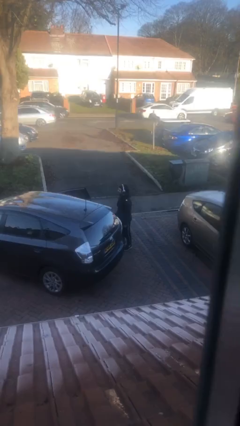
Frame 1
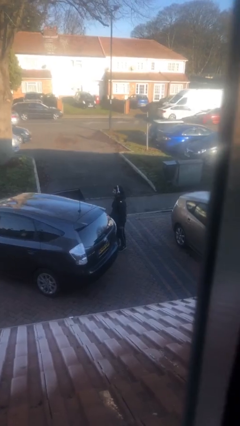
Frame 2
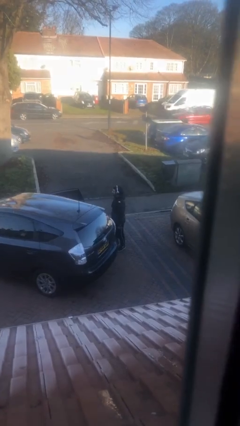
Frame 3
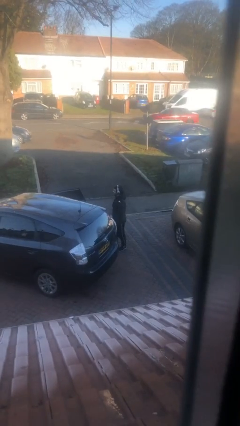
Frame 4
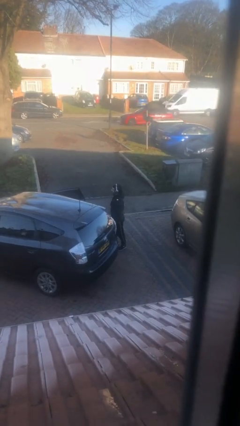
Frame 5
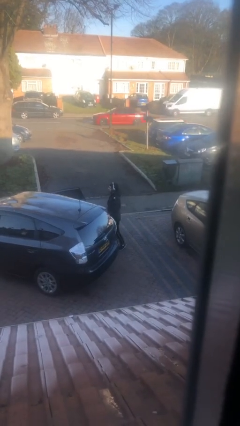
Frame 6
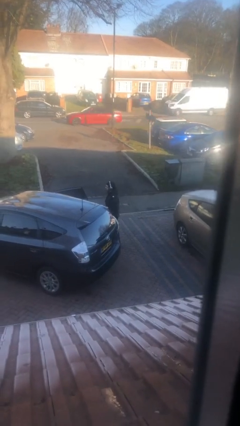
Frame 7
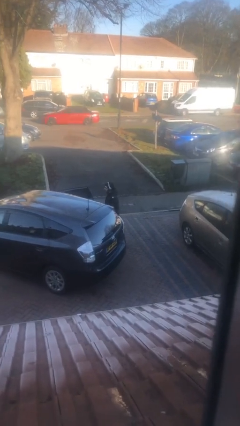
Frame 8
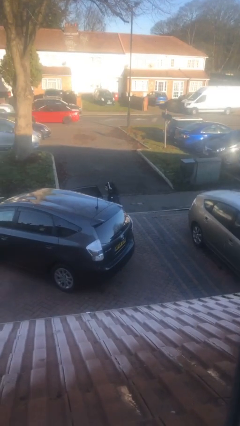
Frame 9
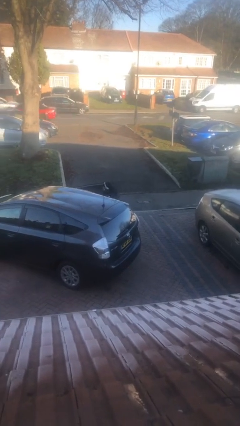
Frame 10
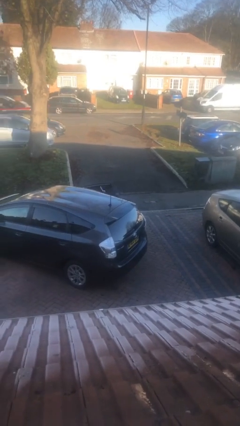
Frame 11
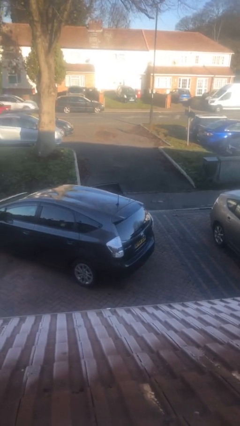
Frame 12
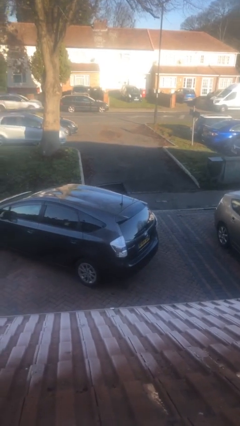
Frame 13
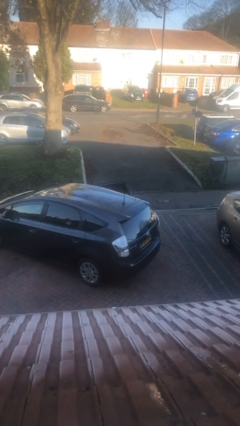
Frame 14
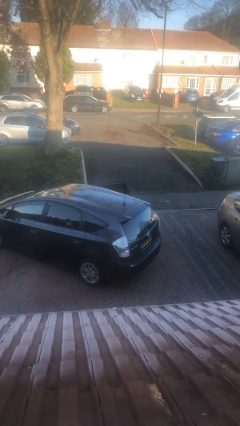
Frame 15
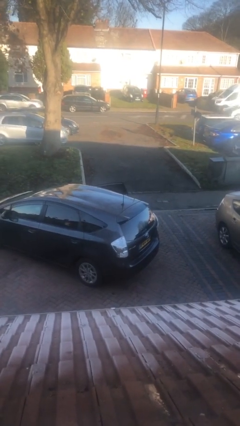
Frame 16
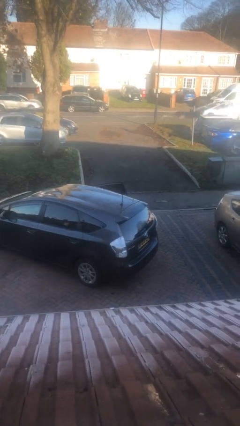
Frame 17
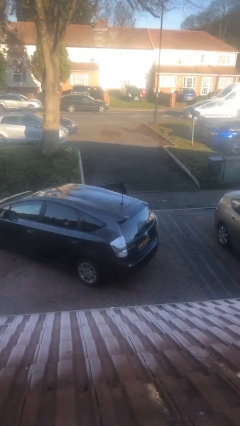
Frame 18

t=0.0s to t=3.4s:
person enters car

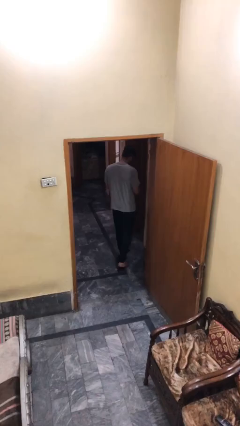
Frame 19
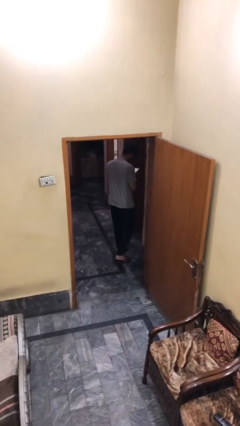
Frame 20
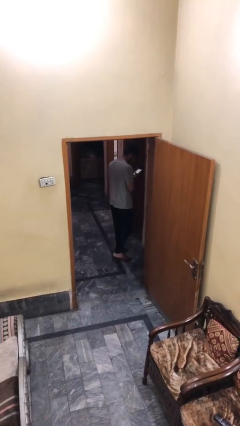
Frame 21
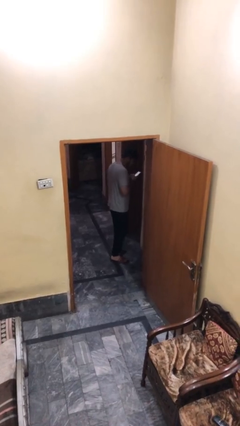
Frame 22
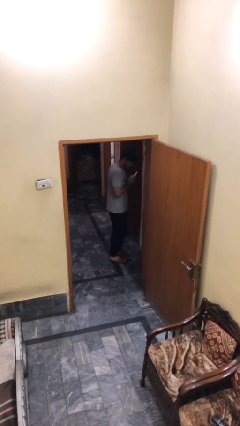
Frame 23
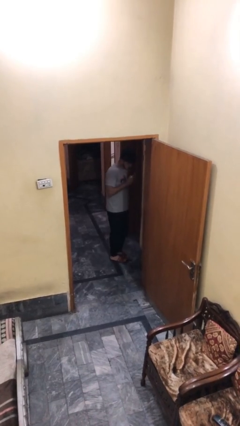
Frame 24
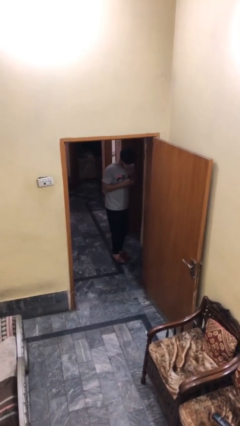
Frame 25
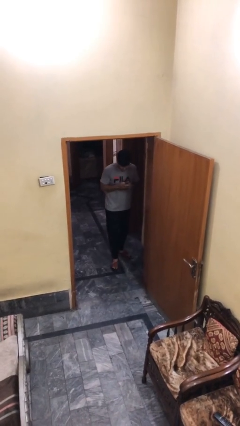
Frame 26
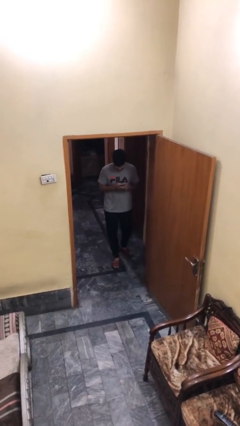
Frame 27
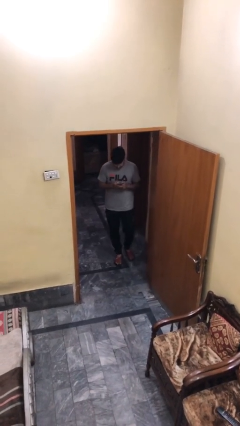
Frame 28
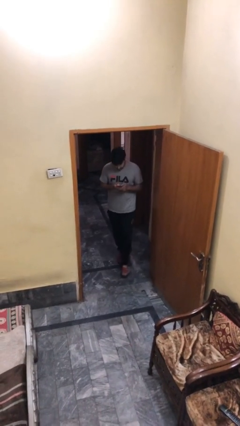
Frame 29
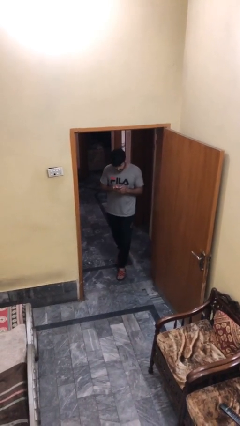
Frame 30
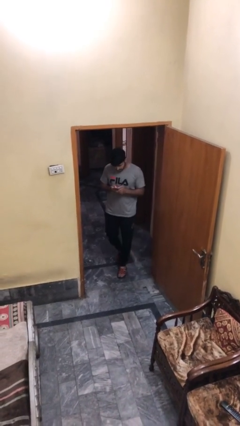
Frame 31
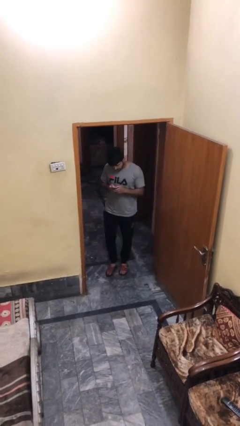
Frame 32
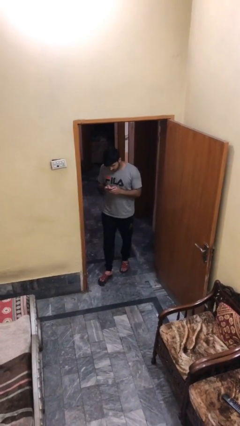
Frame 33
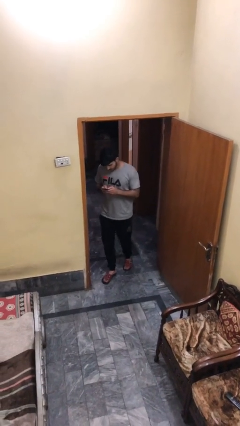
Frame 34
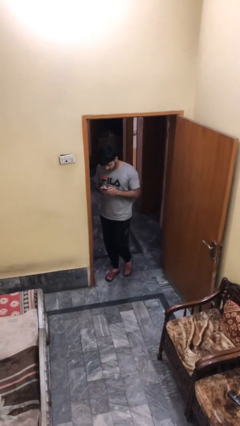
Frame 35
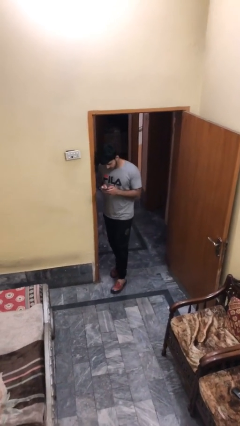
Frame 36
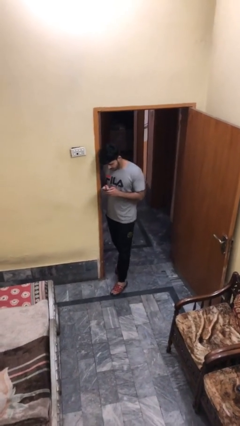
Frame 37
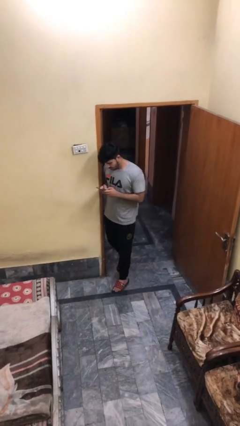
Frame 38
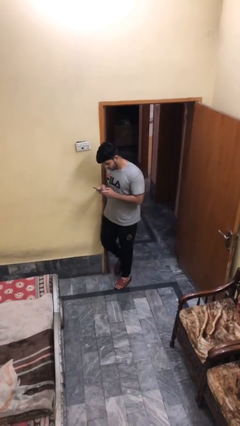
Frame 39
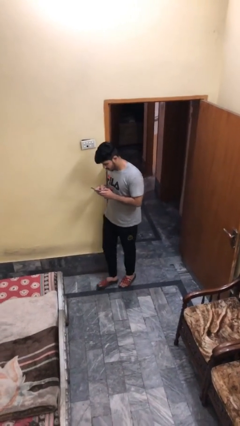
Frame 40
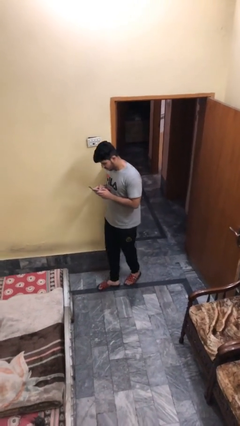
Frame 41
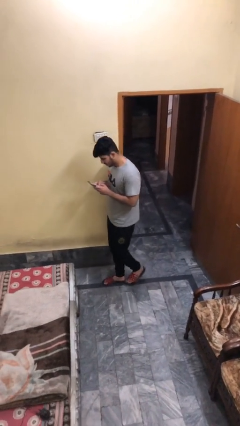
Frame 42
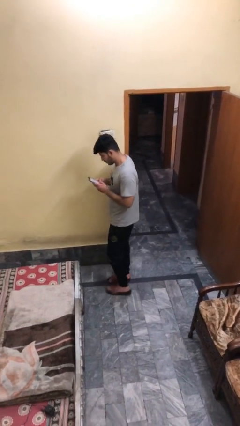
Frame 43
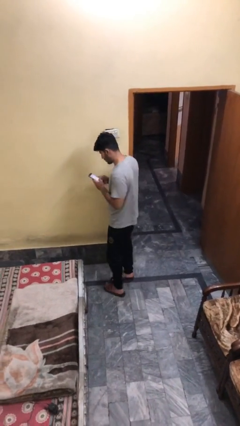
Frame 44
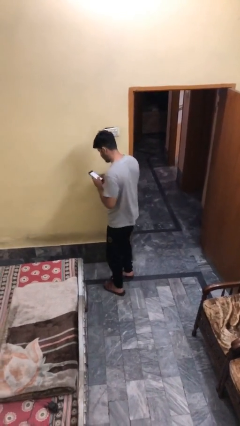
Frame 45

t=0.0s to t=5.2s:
person enters scene through structure

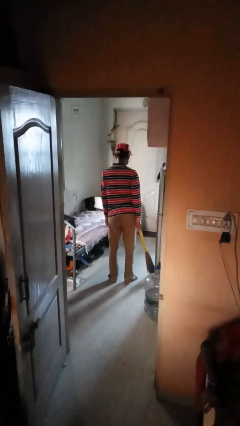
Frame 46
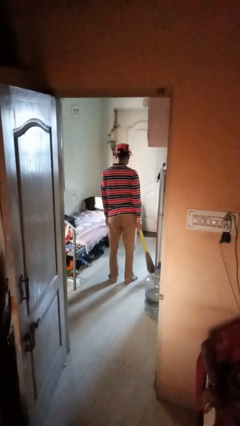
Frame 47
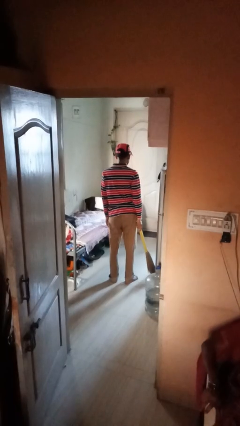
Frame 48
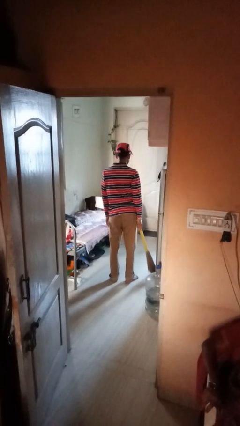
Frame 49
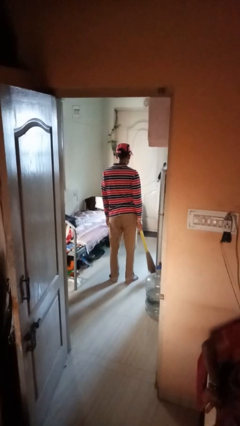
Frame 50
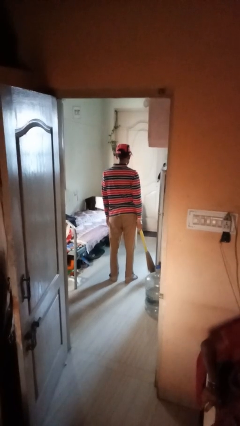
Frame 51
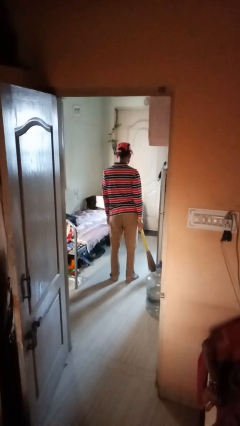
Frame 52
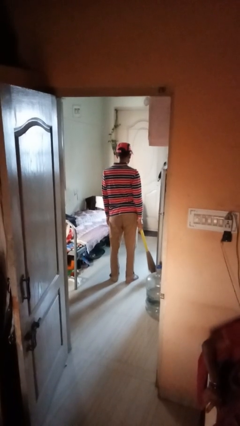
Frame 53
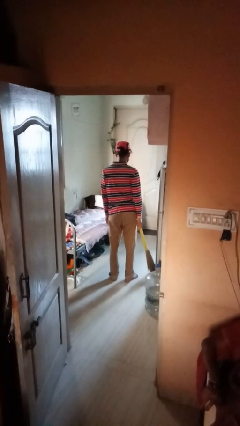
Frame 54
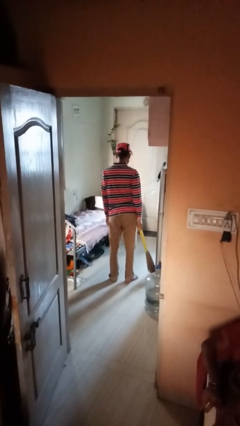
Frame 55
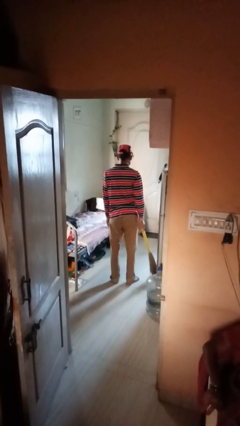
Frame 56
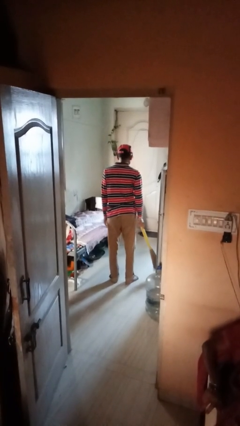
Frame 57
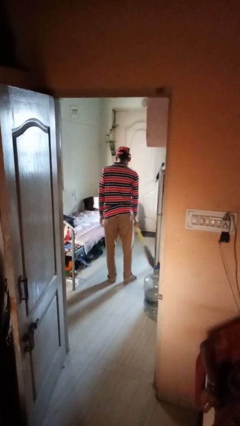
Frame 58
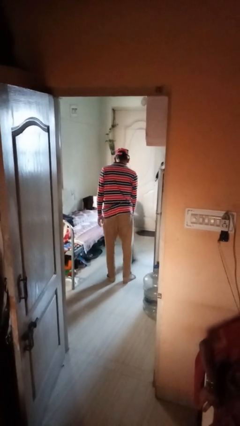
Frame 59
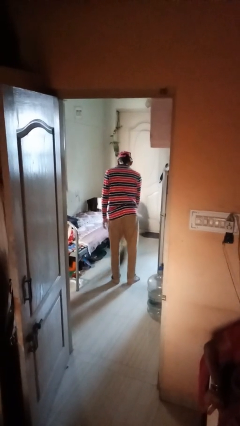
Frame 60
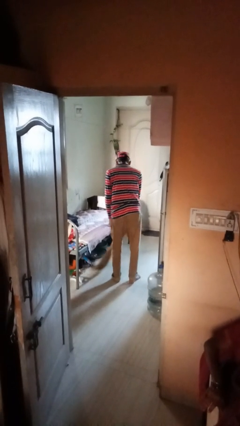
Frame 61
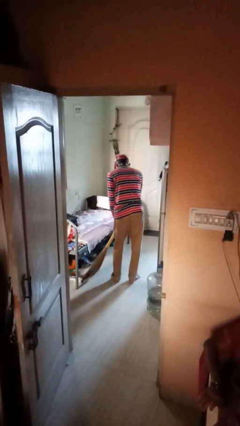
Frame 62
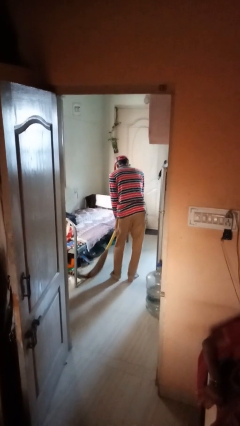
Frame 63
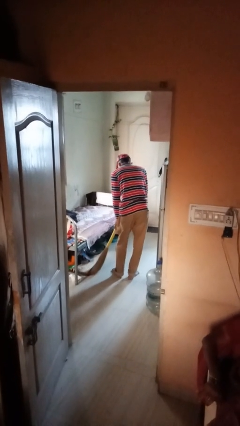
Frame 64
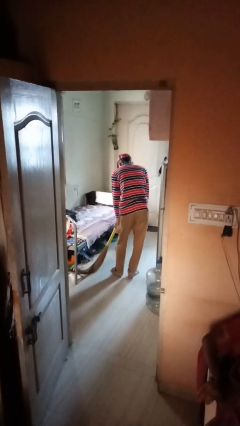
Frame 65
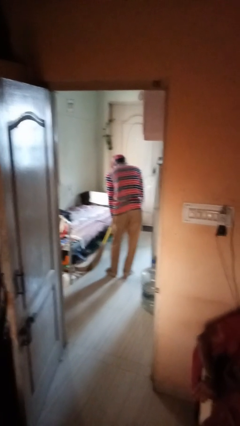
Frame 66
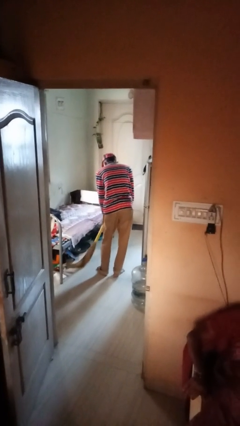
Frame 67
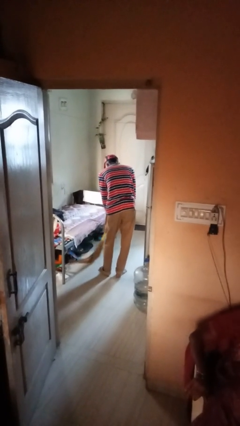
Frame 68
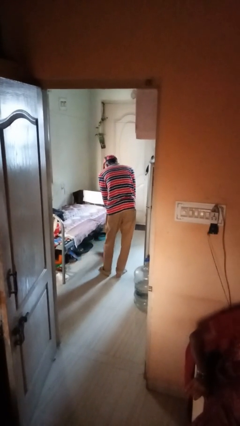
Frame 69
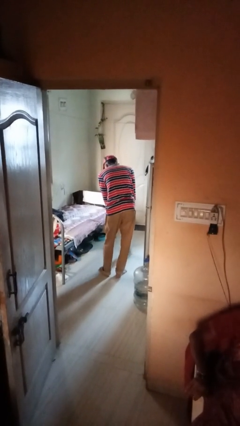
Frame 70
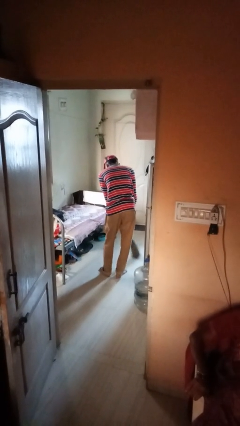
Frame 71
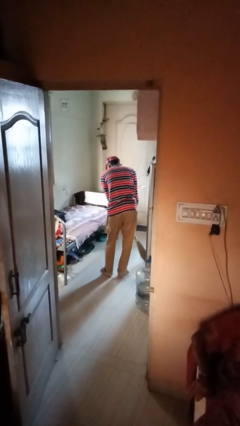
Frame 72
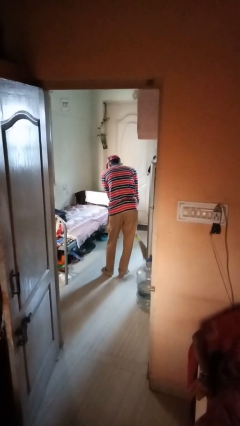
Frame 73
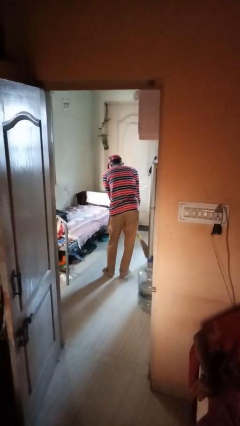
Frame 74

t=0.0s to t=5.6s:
person sweeps floor

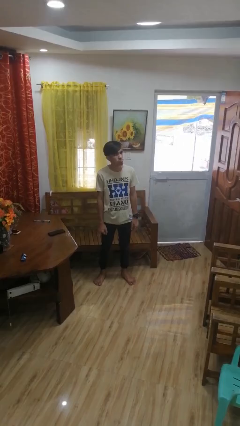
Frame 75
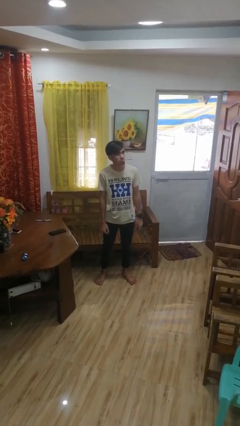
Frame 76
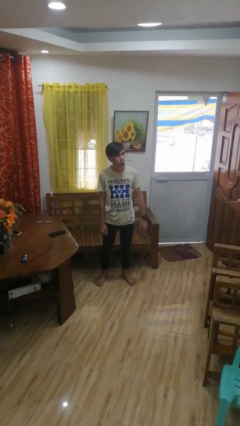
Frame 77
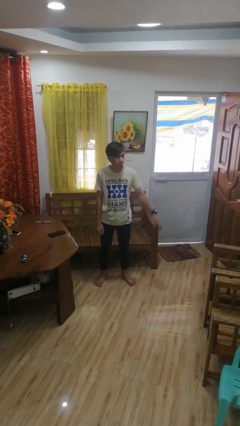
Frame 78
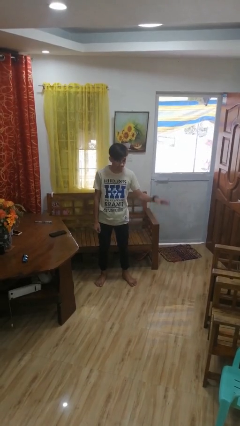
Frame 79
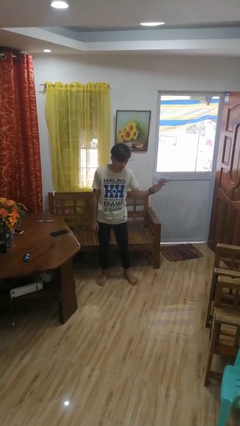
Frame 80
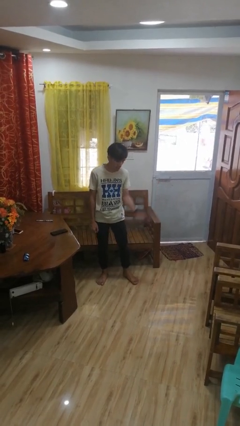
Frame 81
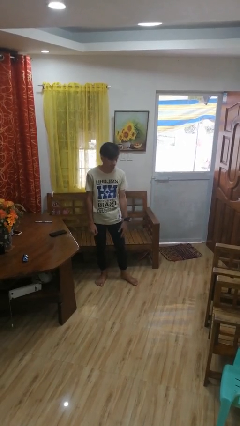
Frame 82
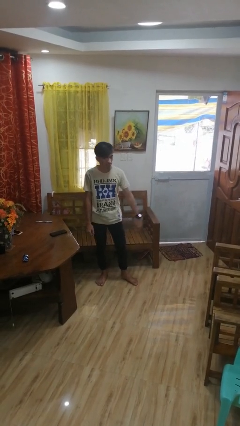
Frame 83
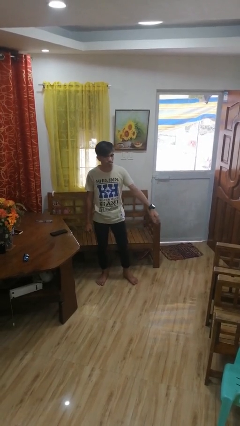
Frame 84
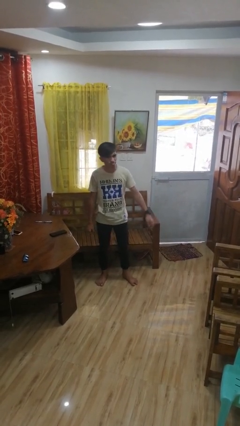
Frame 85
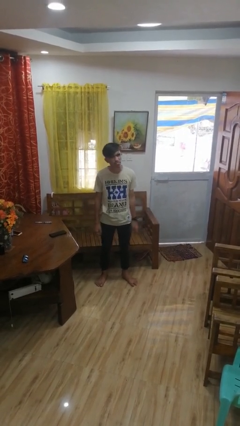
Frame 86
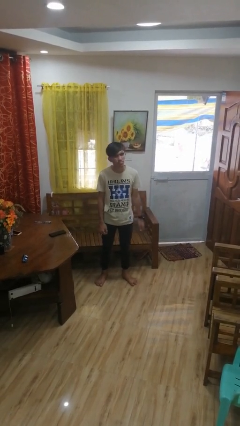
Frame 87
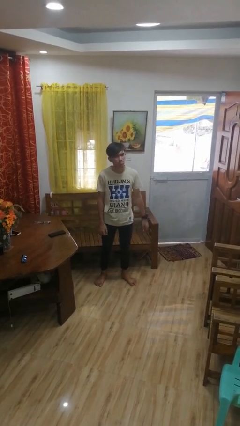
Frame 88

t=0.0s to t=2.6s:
person slaps hands on thighs

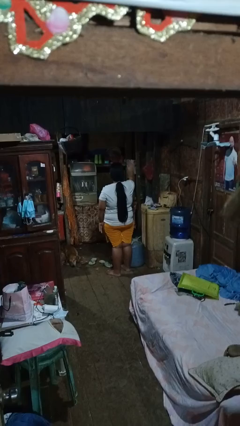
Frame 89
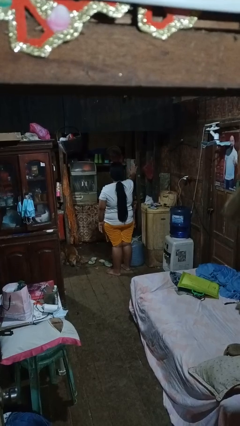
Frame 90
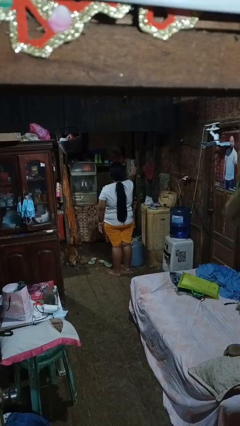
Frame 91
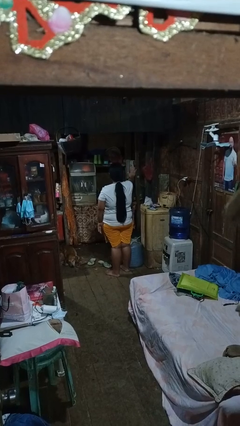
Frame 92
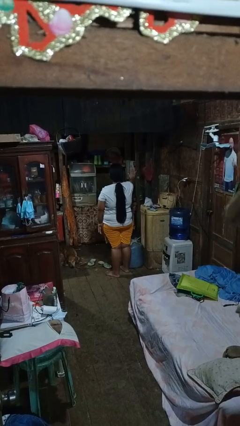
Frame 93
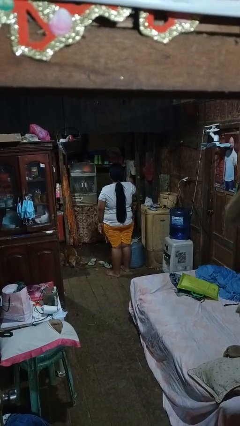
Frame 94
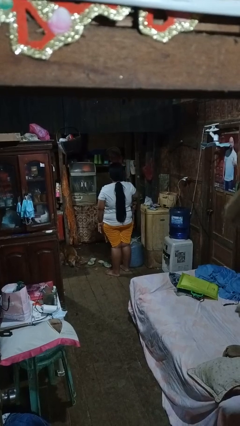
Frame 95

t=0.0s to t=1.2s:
person gestures stop
